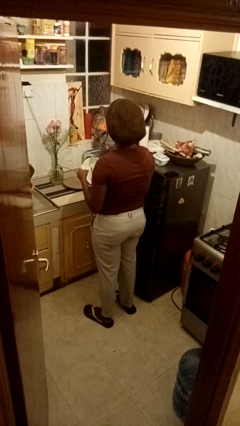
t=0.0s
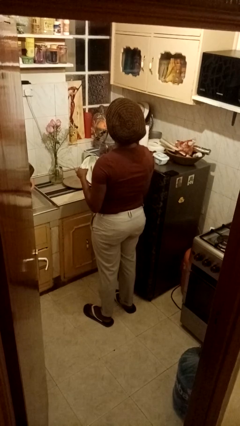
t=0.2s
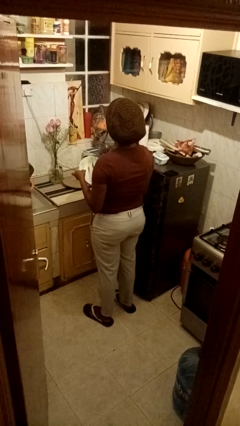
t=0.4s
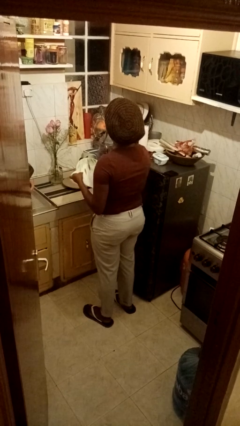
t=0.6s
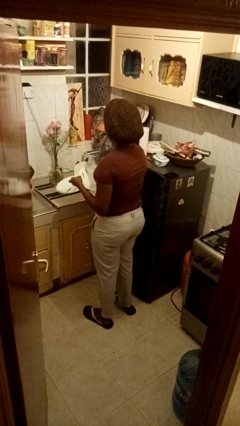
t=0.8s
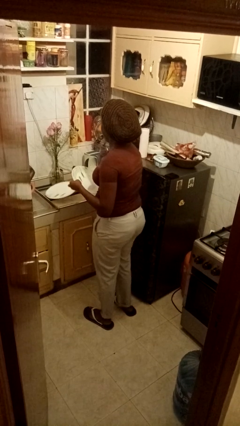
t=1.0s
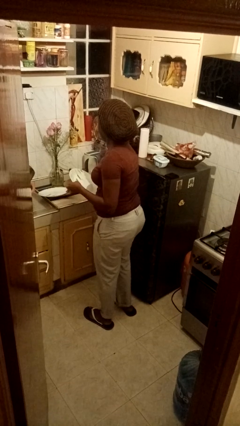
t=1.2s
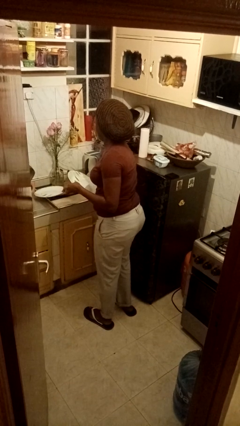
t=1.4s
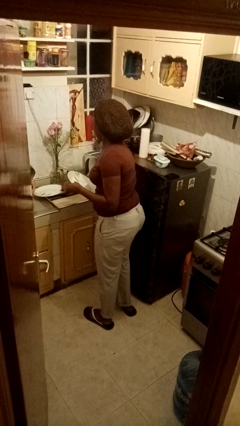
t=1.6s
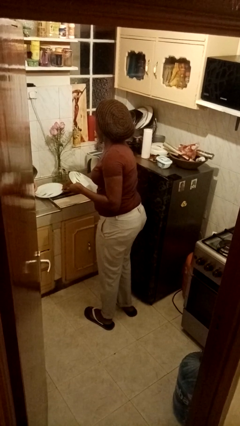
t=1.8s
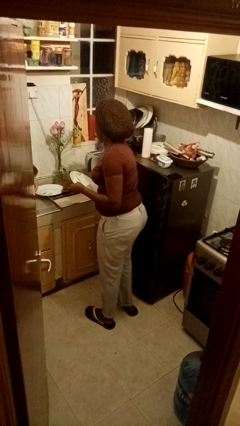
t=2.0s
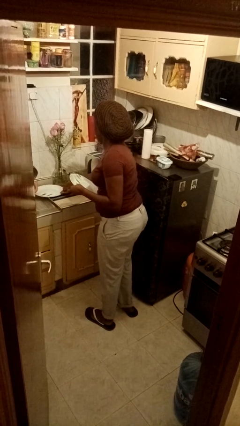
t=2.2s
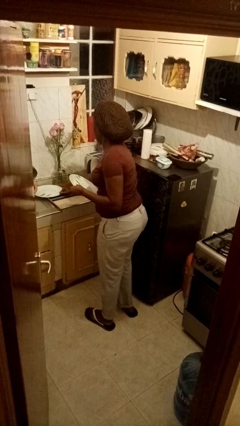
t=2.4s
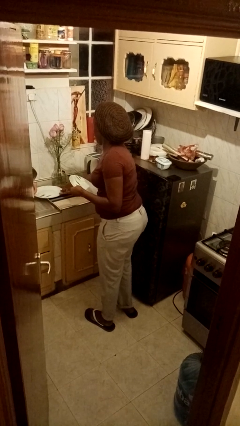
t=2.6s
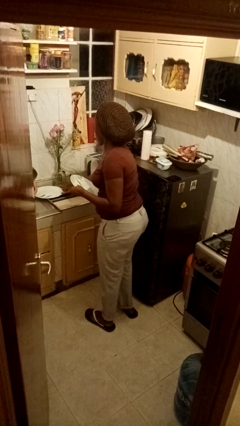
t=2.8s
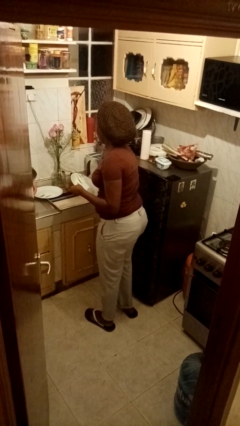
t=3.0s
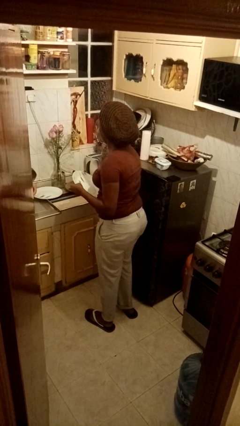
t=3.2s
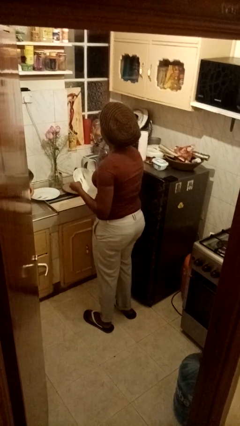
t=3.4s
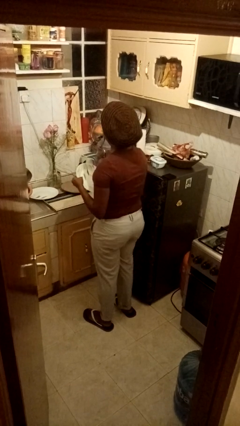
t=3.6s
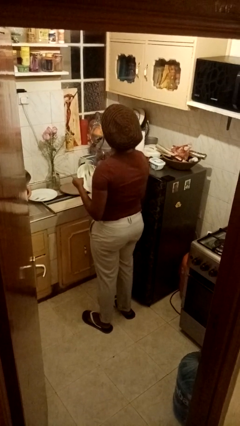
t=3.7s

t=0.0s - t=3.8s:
person sets table

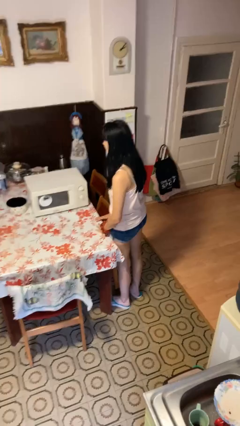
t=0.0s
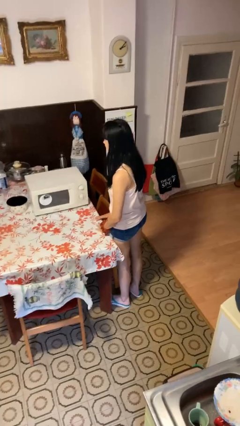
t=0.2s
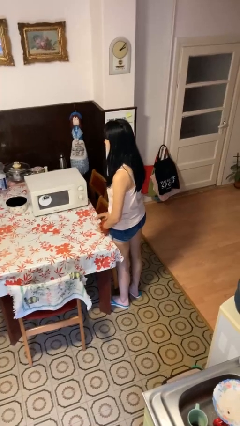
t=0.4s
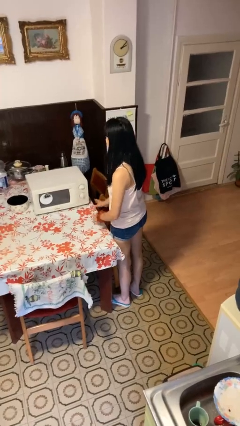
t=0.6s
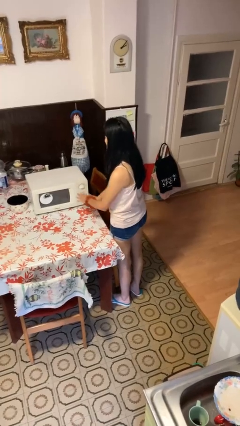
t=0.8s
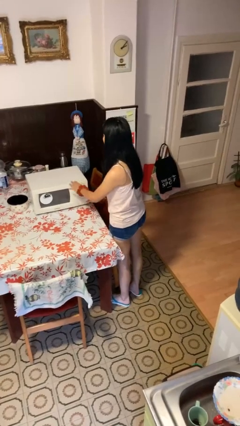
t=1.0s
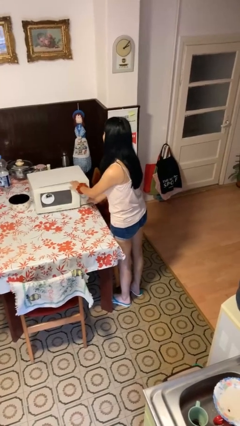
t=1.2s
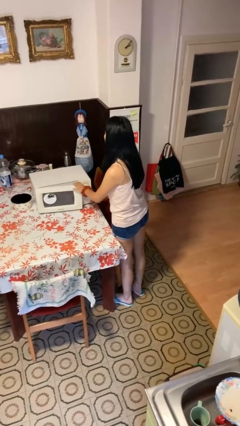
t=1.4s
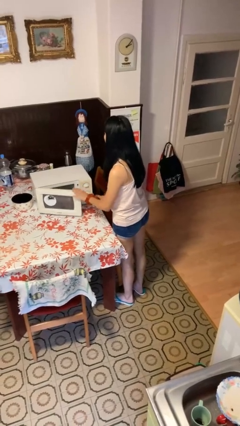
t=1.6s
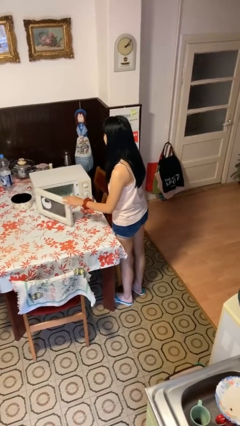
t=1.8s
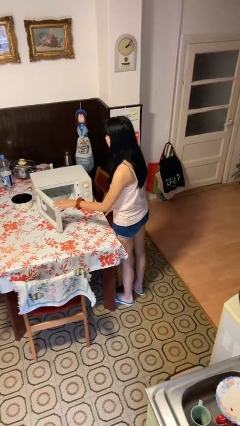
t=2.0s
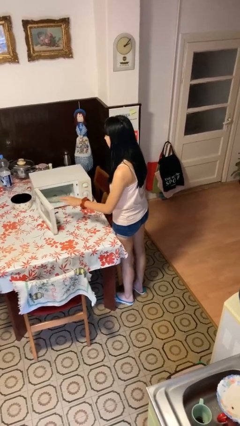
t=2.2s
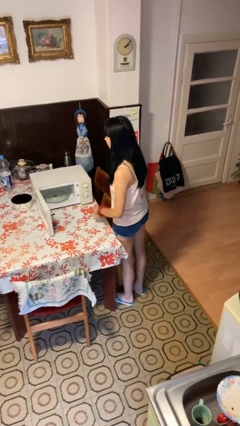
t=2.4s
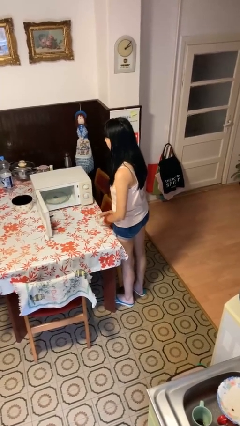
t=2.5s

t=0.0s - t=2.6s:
person opens microwave

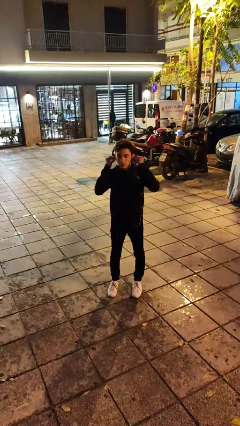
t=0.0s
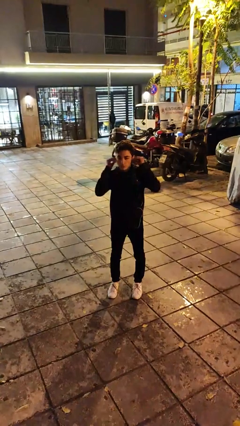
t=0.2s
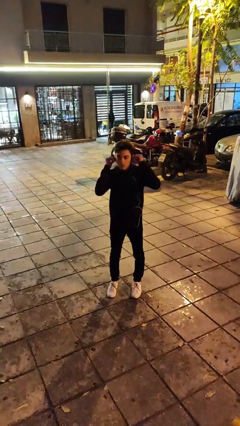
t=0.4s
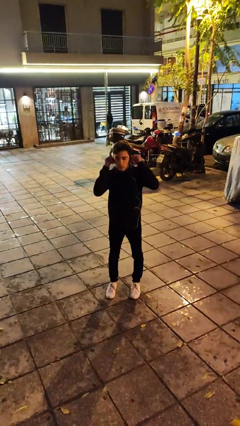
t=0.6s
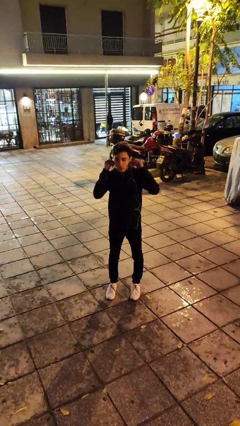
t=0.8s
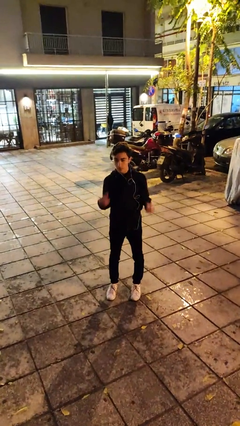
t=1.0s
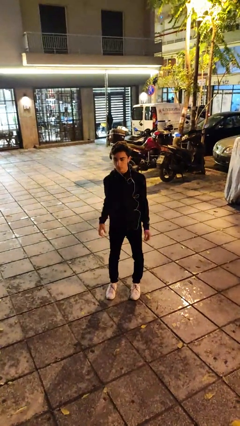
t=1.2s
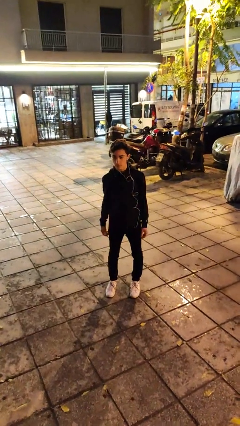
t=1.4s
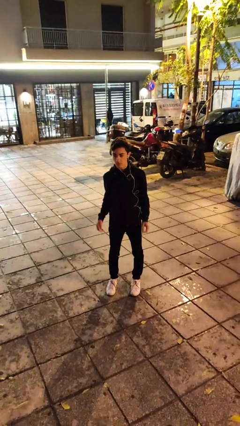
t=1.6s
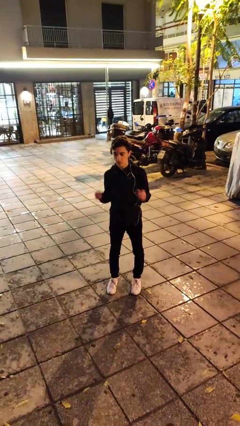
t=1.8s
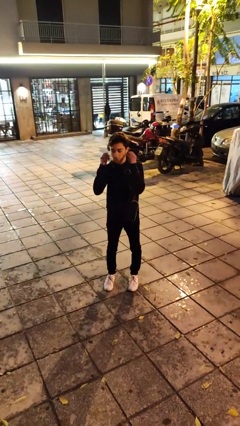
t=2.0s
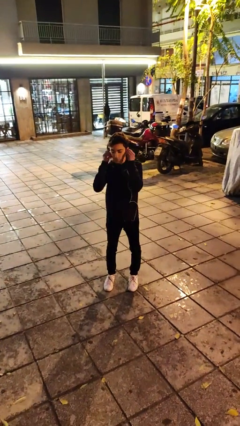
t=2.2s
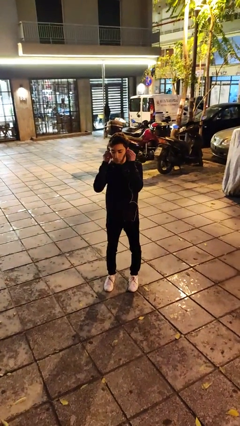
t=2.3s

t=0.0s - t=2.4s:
person puts on headphones

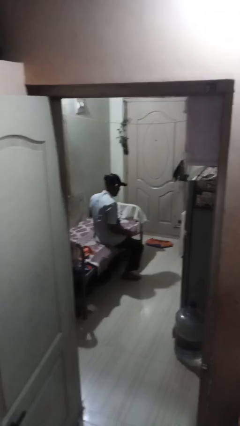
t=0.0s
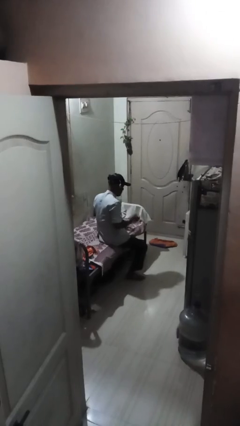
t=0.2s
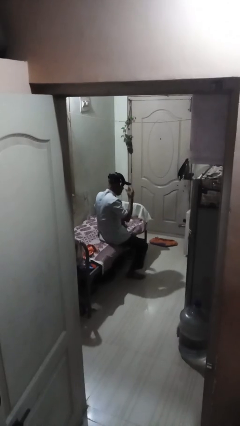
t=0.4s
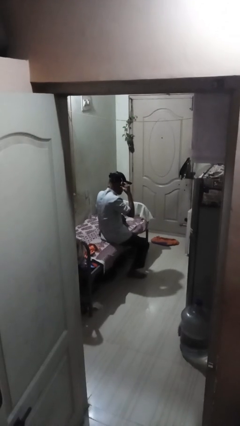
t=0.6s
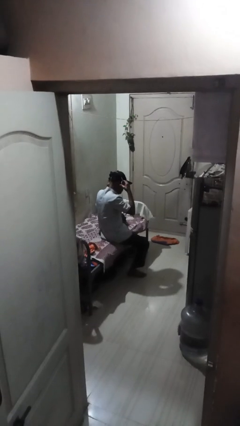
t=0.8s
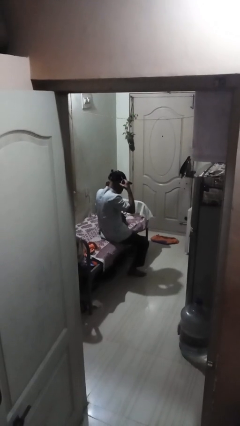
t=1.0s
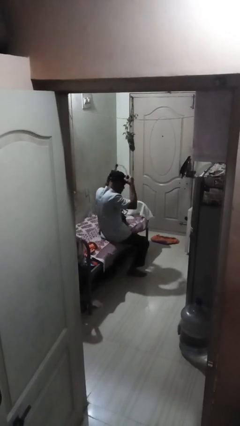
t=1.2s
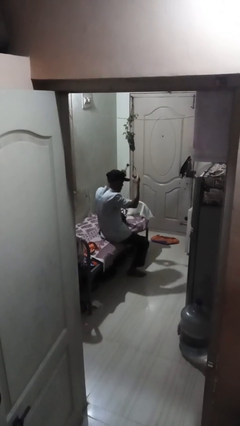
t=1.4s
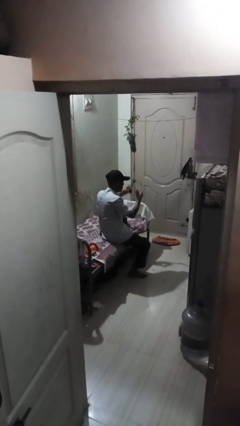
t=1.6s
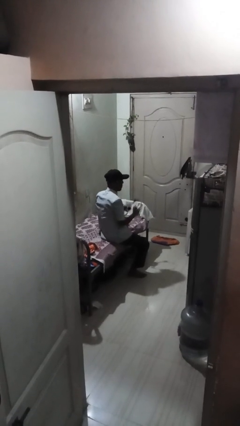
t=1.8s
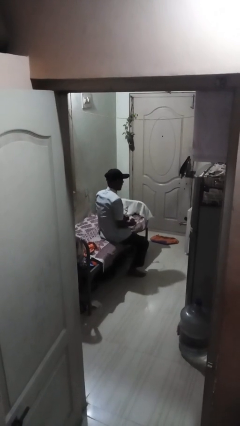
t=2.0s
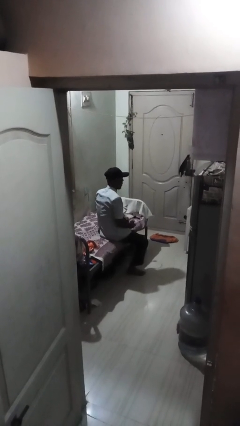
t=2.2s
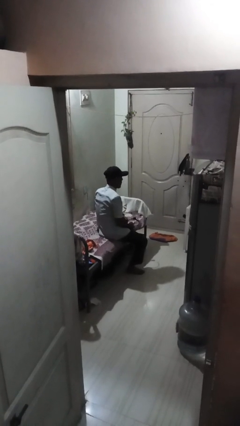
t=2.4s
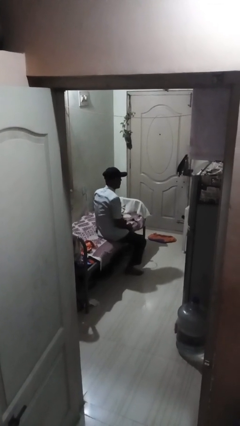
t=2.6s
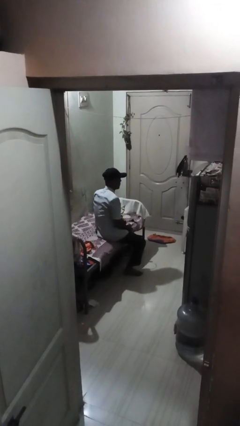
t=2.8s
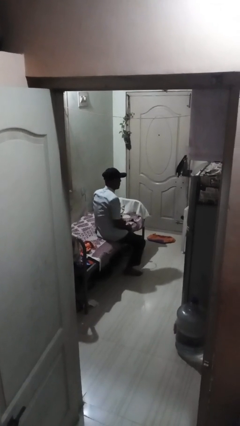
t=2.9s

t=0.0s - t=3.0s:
person takes off headphones

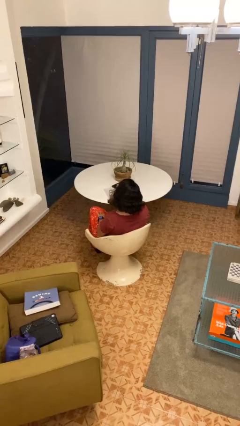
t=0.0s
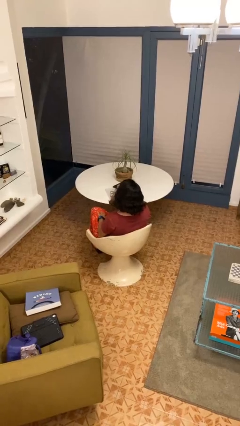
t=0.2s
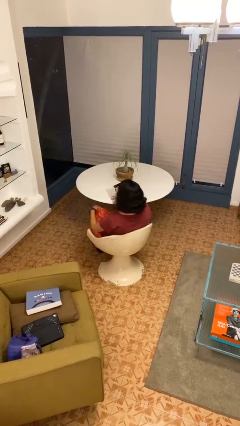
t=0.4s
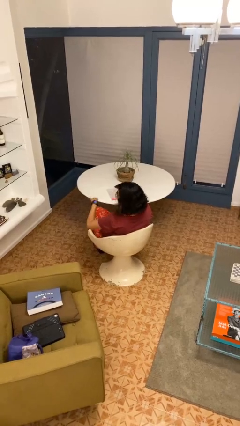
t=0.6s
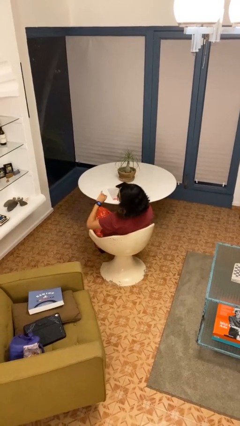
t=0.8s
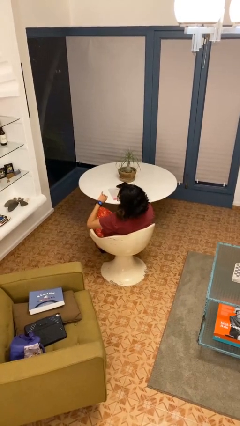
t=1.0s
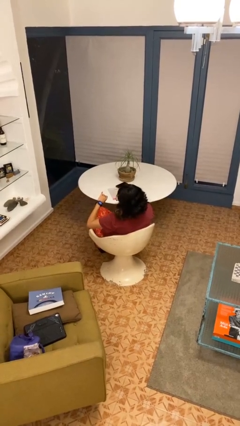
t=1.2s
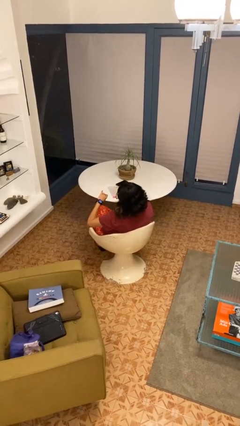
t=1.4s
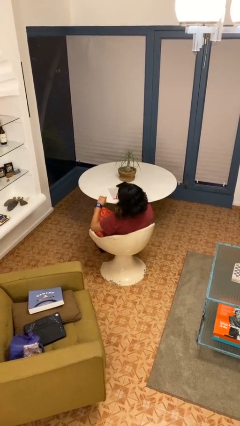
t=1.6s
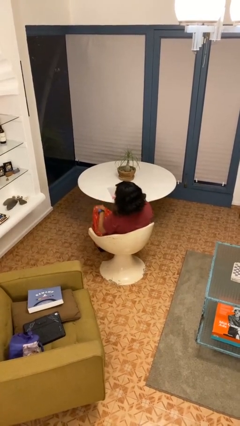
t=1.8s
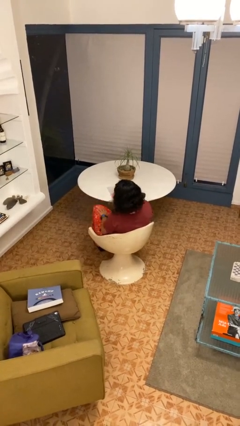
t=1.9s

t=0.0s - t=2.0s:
person looks at wristwatch

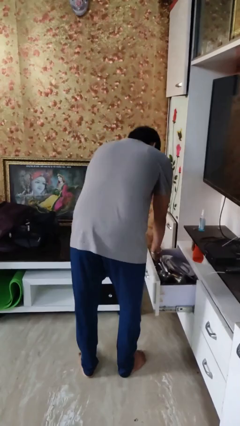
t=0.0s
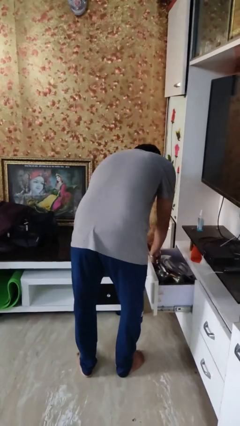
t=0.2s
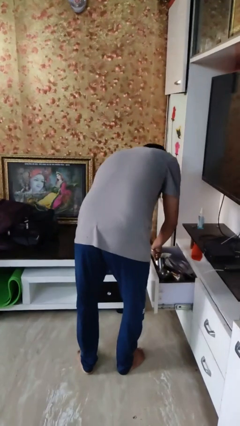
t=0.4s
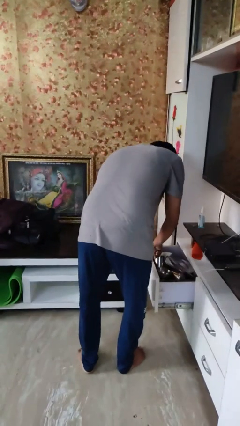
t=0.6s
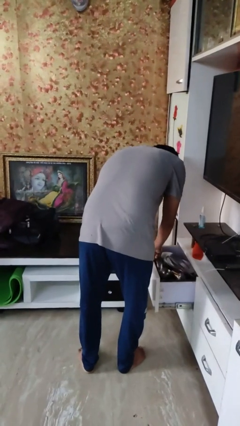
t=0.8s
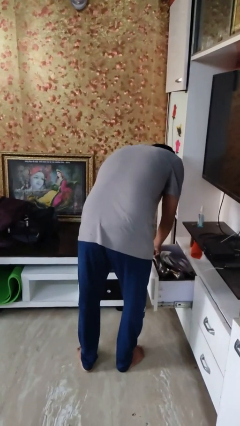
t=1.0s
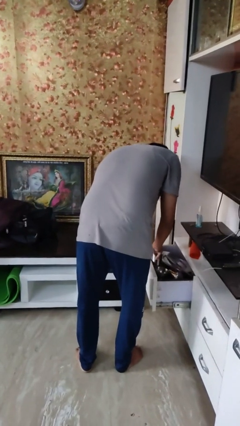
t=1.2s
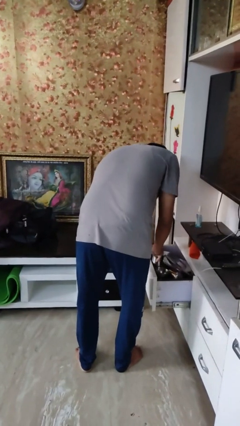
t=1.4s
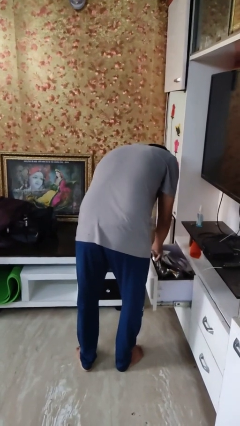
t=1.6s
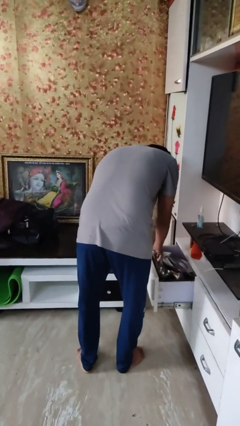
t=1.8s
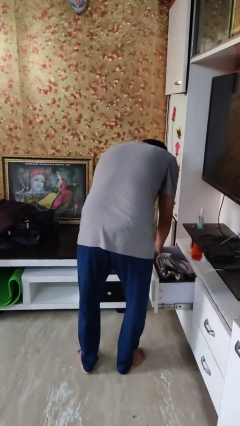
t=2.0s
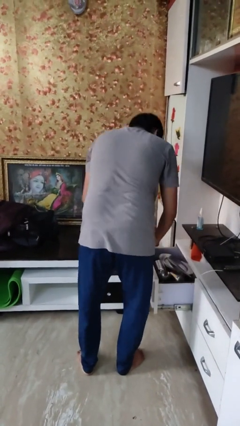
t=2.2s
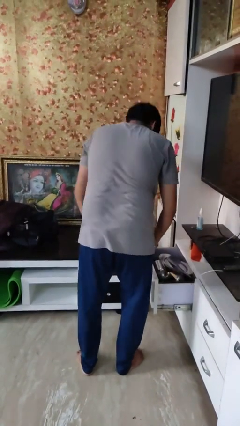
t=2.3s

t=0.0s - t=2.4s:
person searches in kitchen drawer

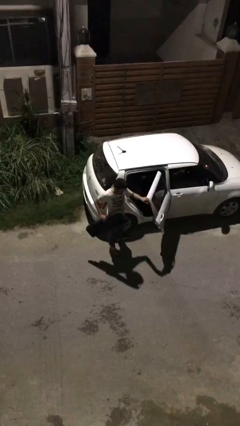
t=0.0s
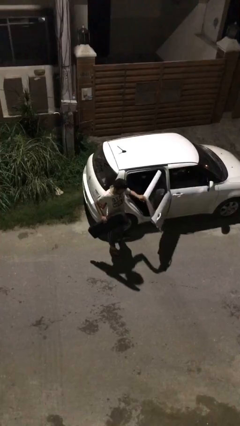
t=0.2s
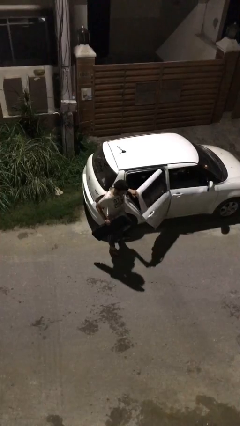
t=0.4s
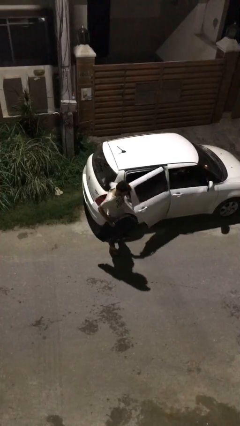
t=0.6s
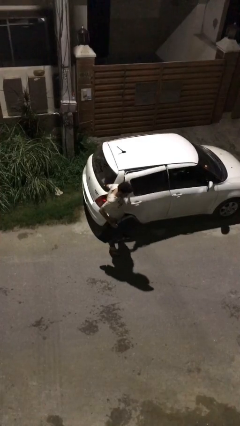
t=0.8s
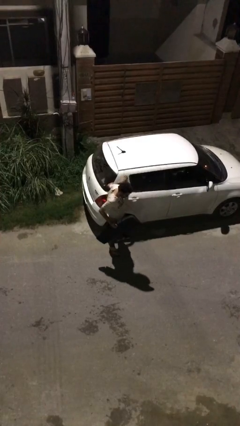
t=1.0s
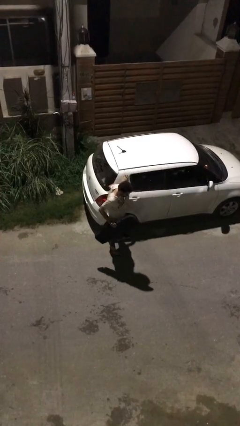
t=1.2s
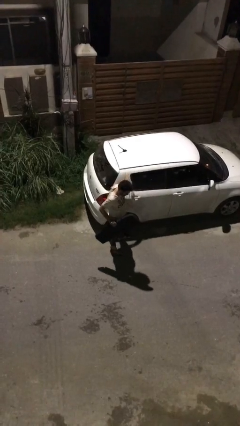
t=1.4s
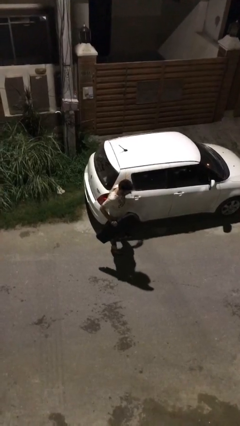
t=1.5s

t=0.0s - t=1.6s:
person closes car door
